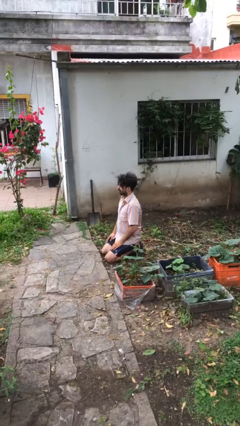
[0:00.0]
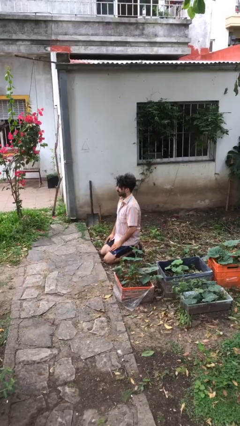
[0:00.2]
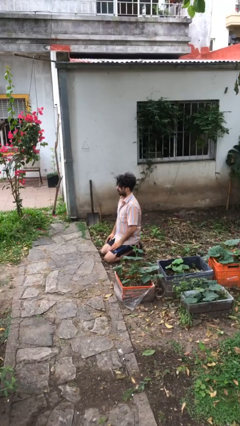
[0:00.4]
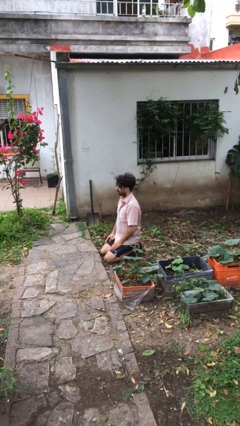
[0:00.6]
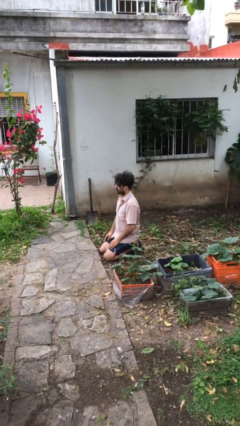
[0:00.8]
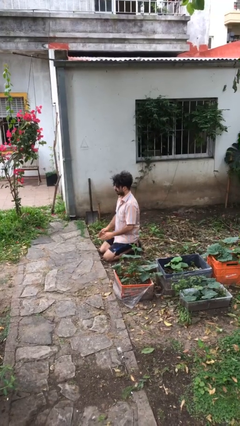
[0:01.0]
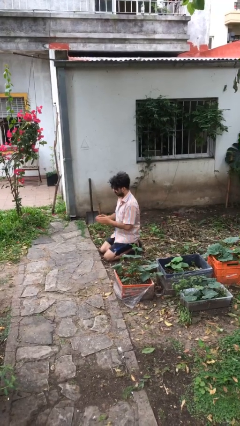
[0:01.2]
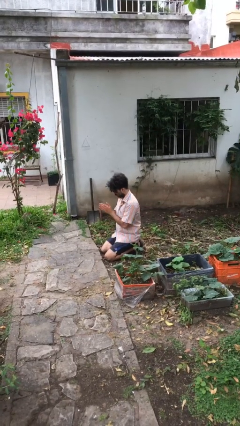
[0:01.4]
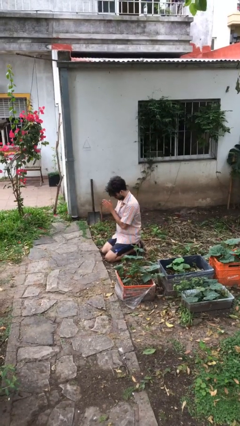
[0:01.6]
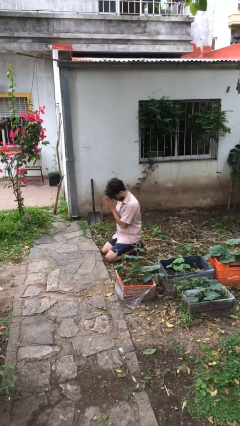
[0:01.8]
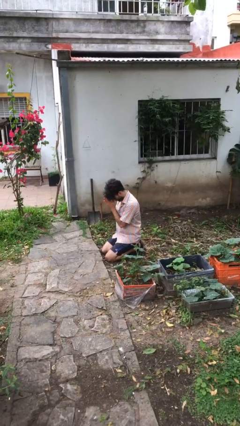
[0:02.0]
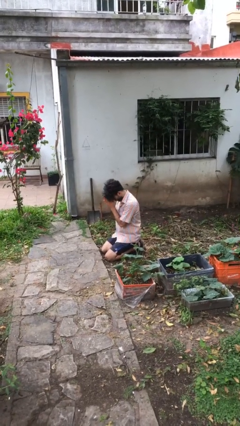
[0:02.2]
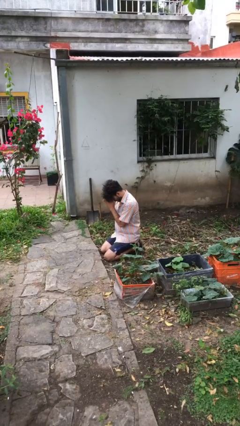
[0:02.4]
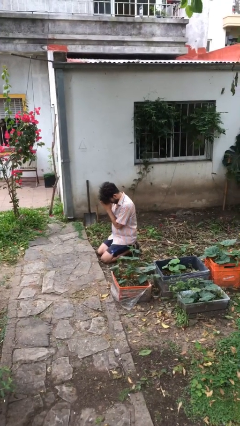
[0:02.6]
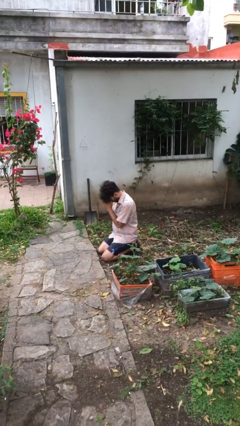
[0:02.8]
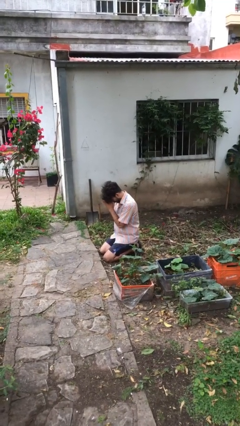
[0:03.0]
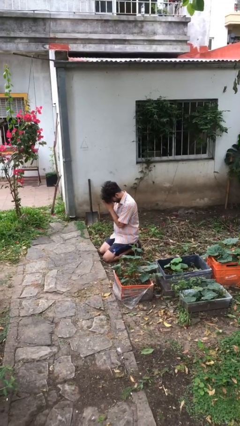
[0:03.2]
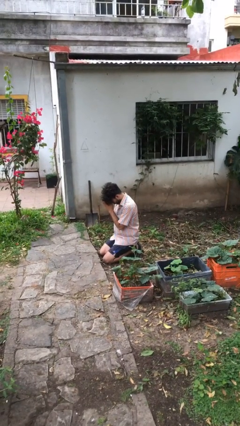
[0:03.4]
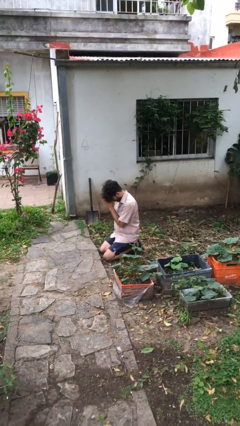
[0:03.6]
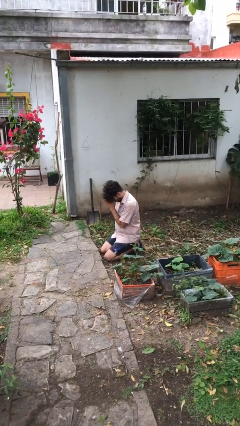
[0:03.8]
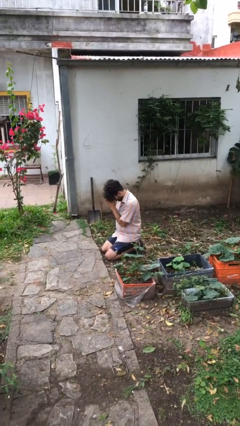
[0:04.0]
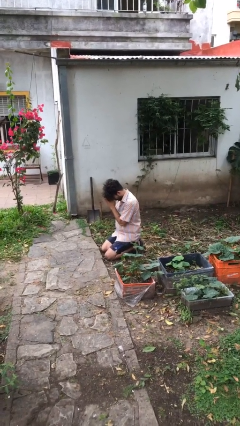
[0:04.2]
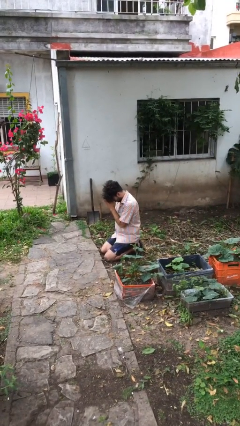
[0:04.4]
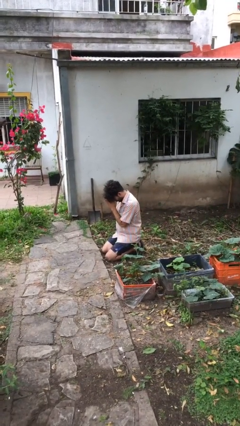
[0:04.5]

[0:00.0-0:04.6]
person prays

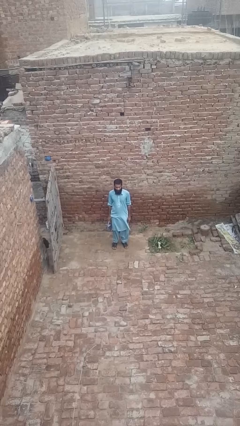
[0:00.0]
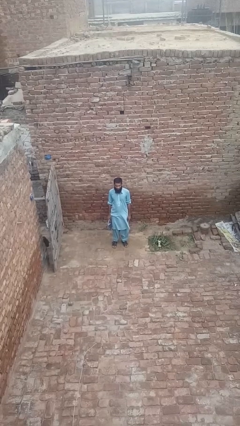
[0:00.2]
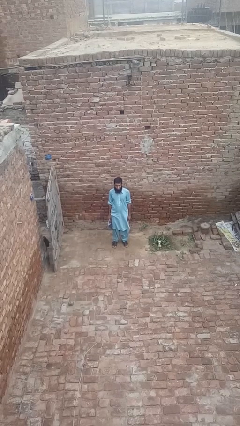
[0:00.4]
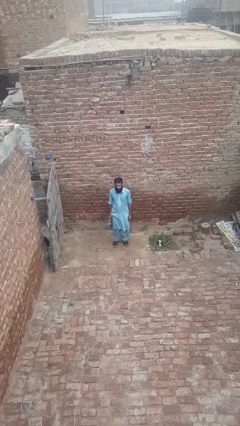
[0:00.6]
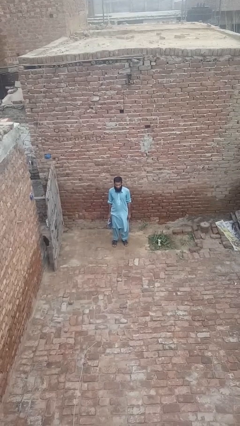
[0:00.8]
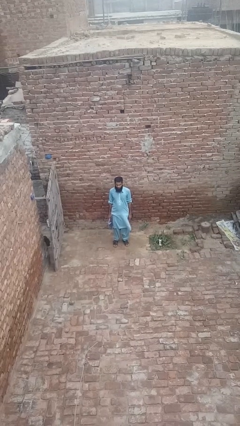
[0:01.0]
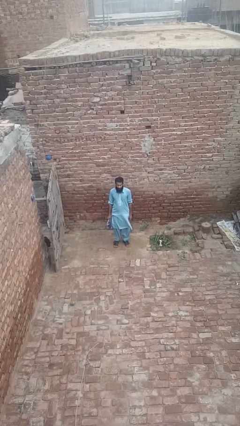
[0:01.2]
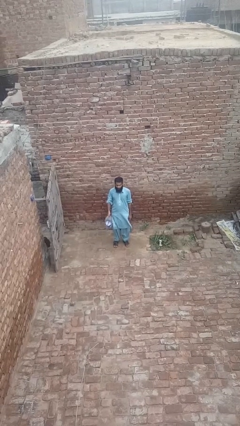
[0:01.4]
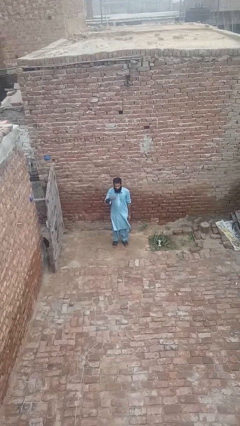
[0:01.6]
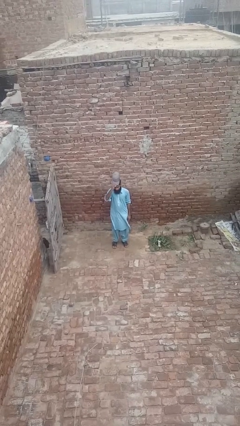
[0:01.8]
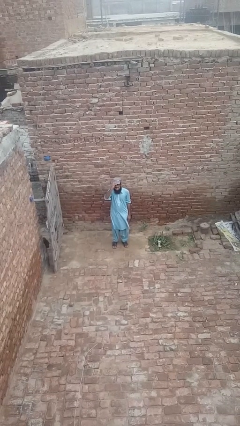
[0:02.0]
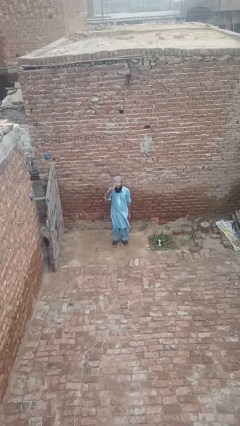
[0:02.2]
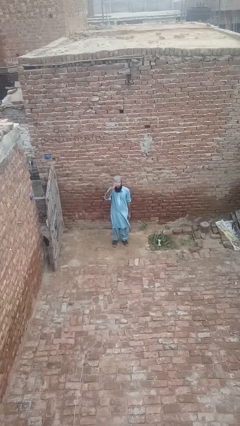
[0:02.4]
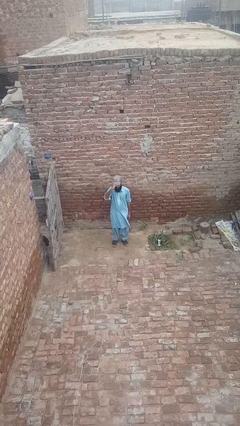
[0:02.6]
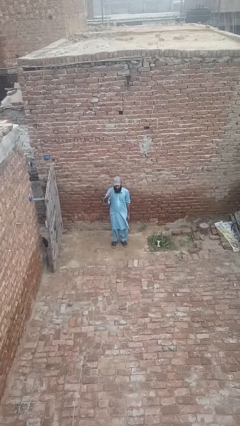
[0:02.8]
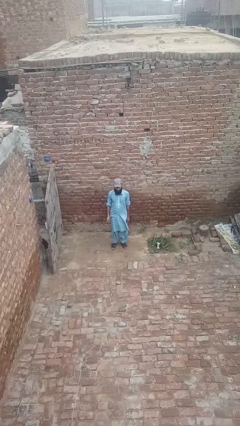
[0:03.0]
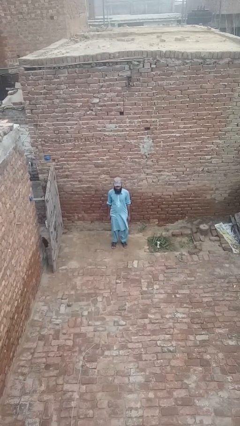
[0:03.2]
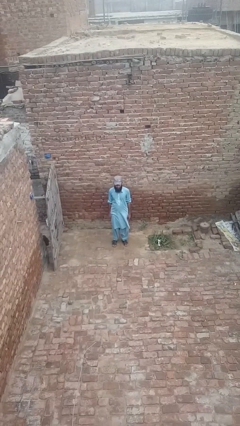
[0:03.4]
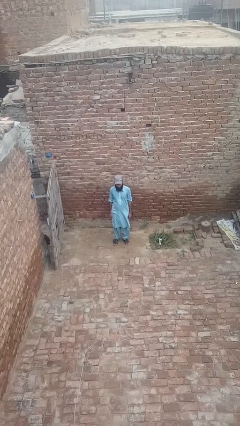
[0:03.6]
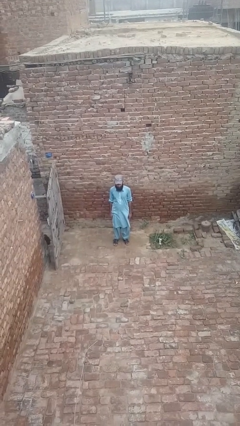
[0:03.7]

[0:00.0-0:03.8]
person puts on hat

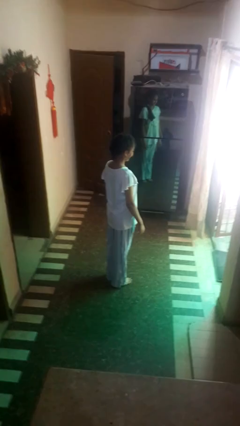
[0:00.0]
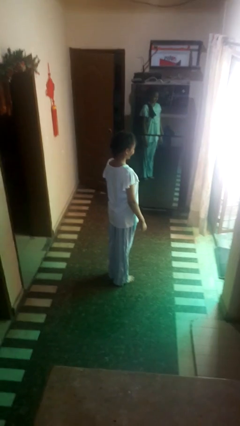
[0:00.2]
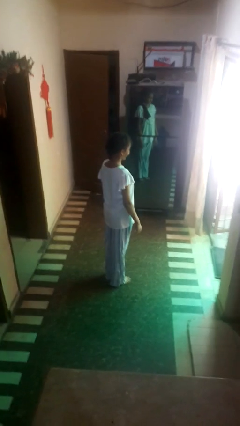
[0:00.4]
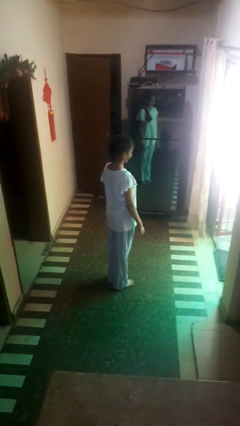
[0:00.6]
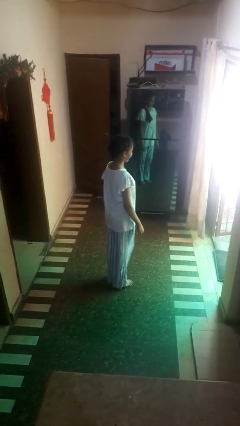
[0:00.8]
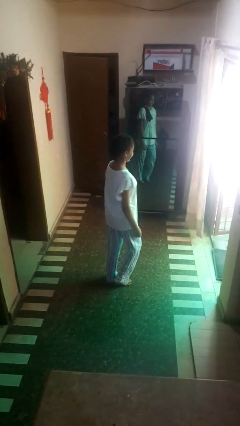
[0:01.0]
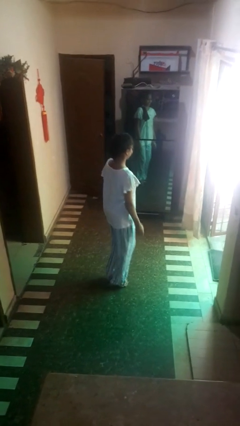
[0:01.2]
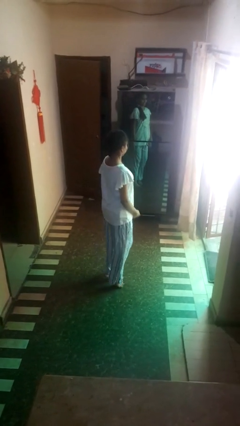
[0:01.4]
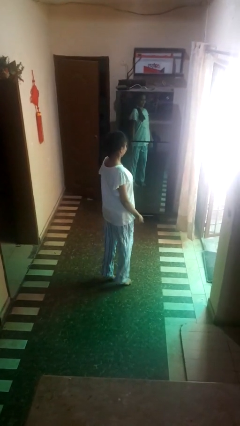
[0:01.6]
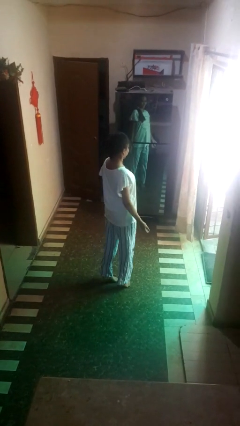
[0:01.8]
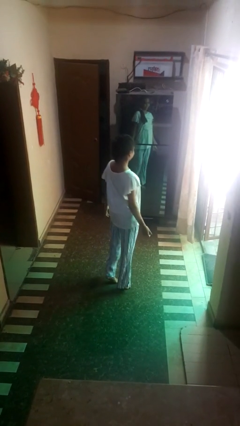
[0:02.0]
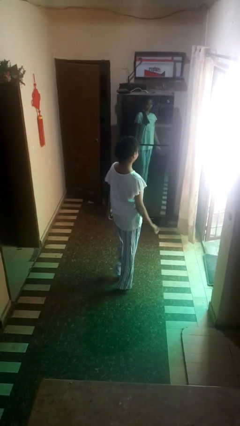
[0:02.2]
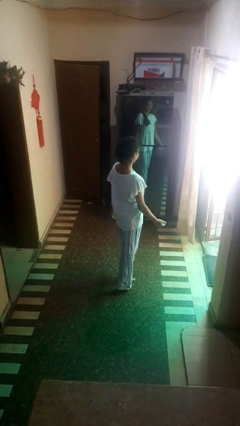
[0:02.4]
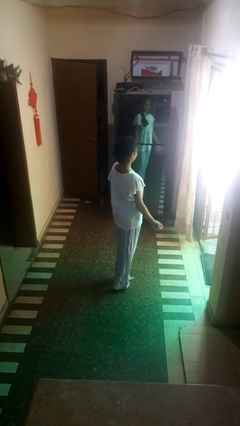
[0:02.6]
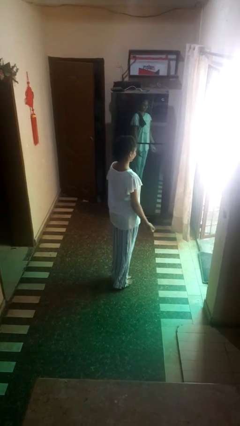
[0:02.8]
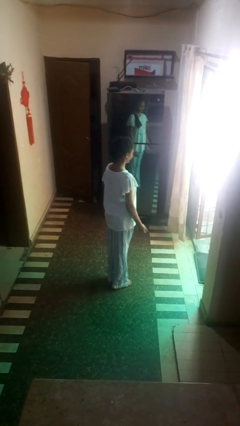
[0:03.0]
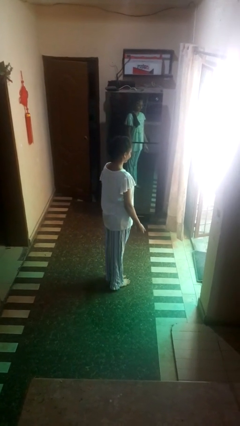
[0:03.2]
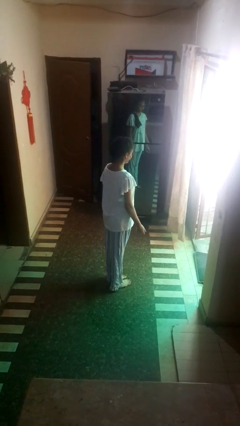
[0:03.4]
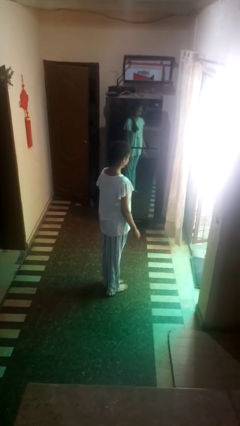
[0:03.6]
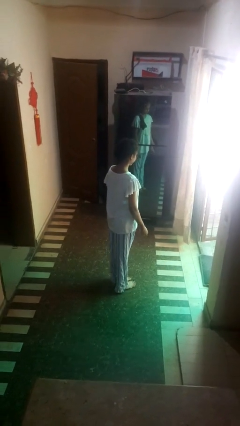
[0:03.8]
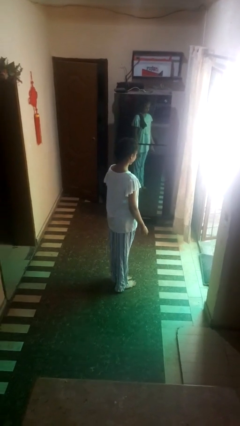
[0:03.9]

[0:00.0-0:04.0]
person walks tiptoe

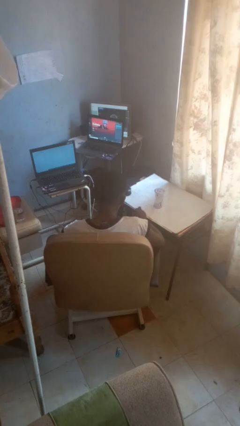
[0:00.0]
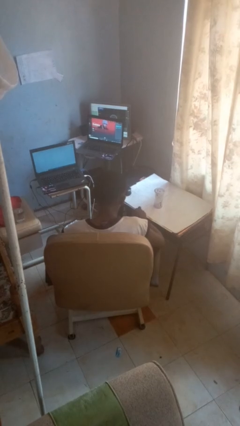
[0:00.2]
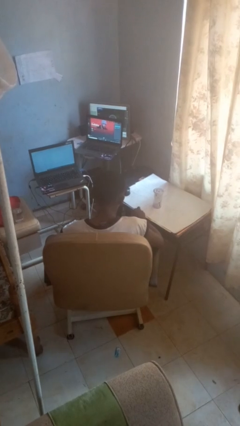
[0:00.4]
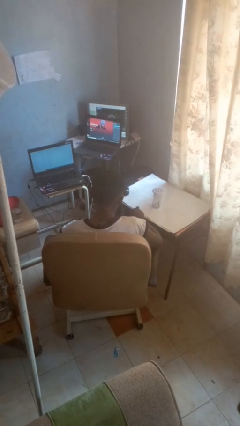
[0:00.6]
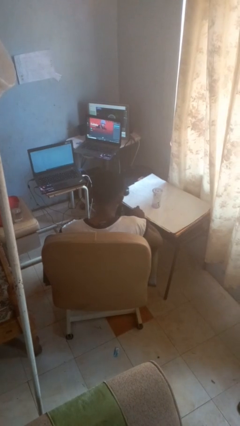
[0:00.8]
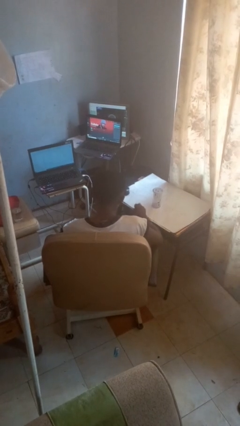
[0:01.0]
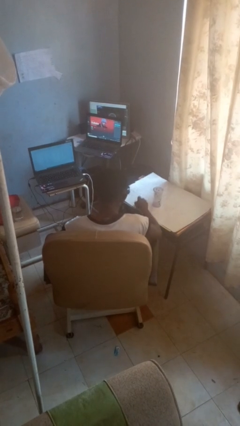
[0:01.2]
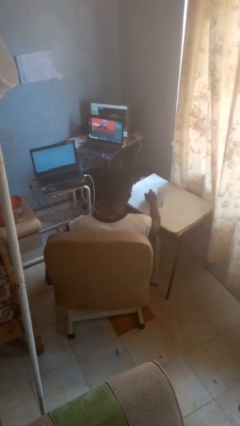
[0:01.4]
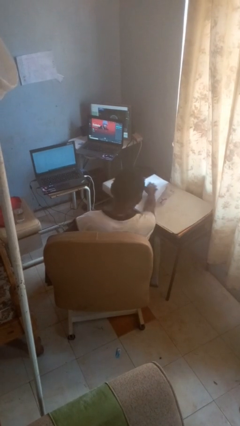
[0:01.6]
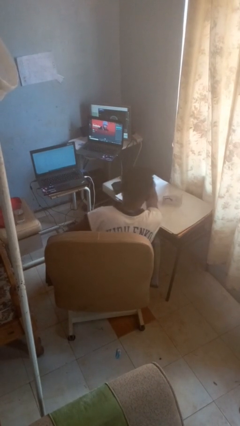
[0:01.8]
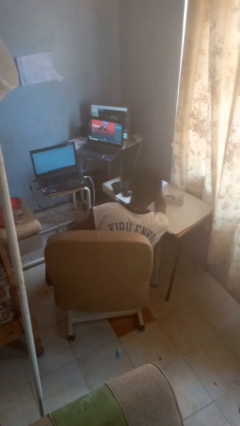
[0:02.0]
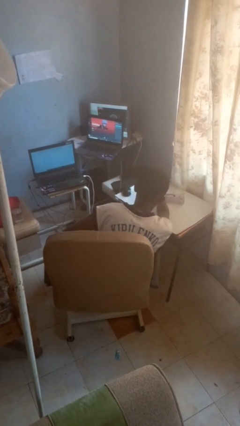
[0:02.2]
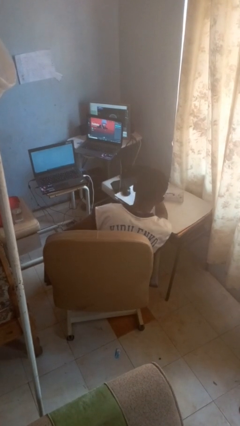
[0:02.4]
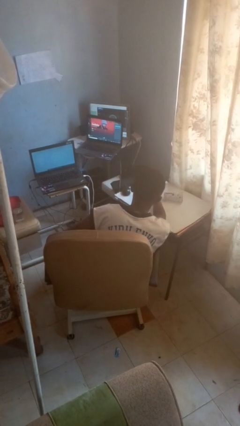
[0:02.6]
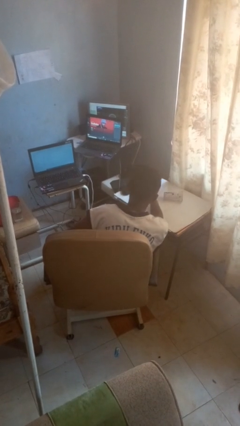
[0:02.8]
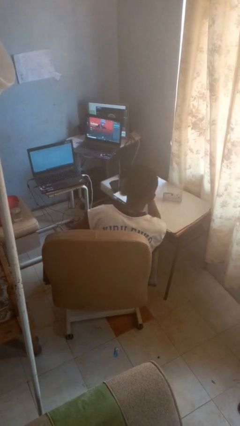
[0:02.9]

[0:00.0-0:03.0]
person knocks over glass

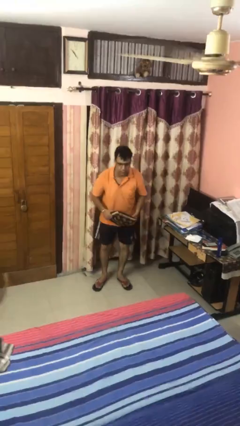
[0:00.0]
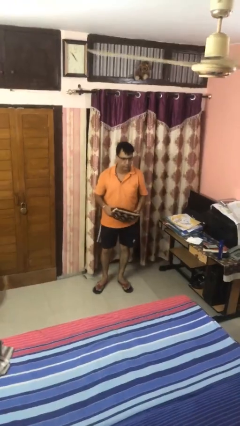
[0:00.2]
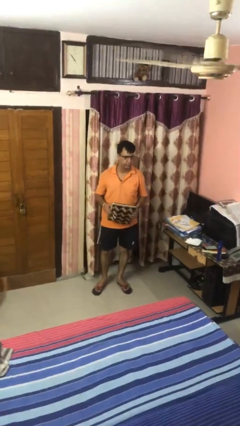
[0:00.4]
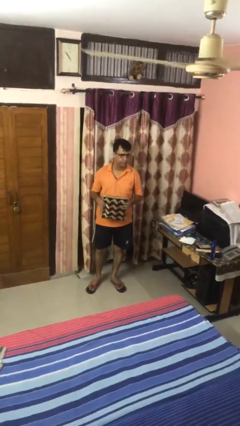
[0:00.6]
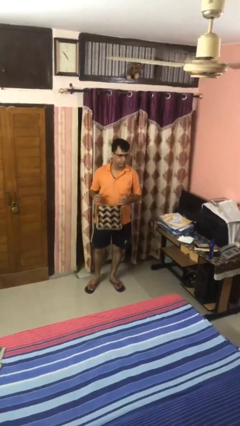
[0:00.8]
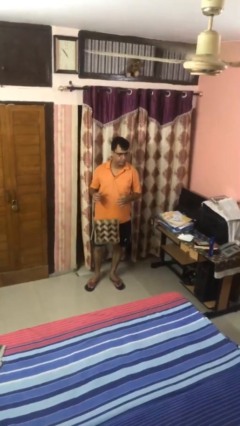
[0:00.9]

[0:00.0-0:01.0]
person drops object

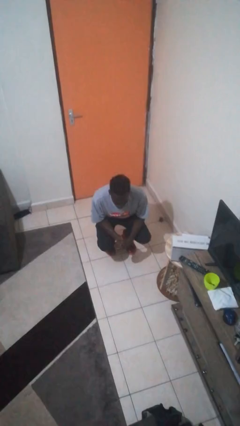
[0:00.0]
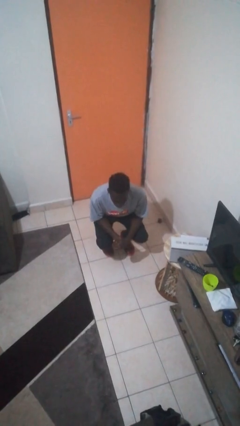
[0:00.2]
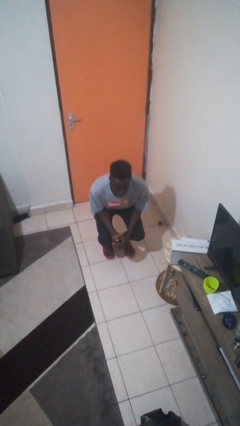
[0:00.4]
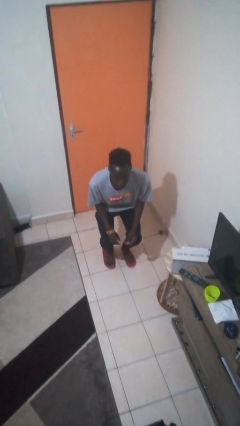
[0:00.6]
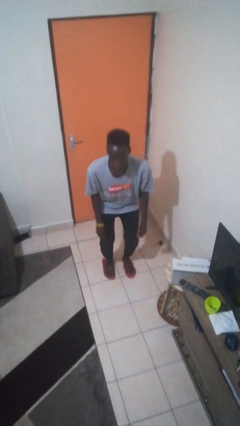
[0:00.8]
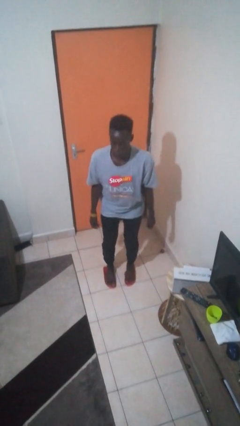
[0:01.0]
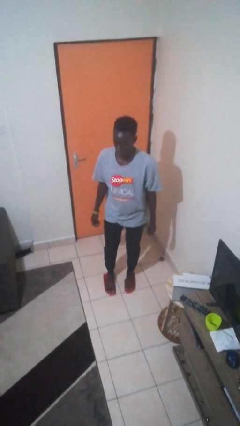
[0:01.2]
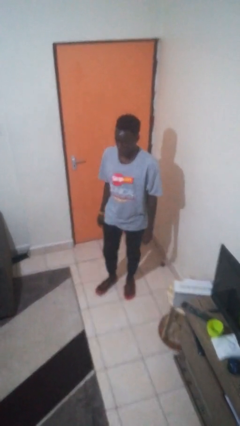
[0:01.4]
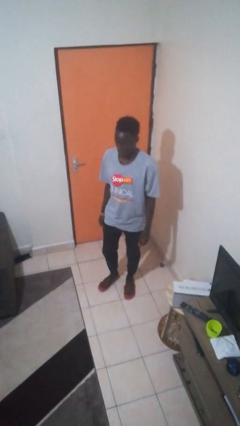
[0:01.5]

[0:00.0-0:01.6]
person stands up
